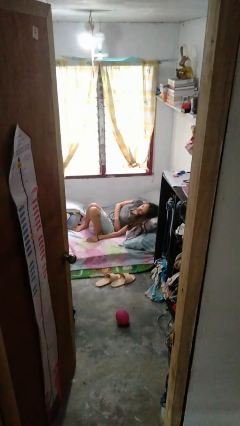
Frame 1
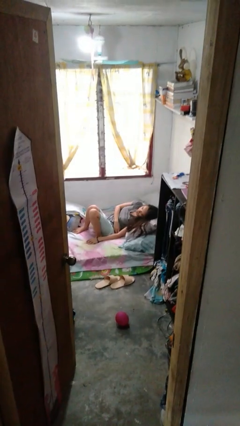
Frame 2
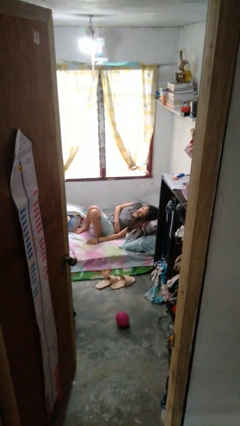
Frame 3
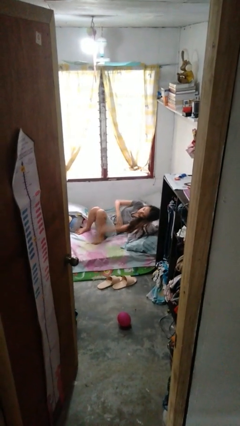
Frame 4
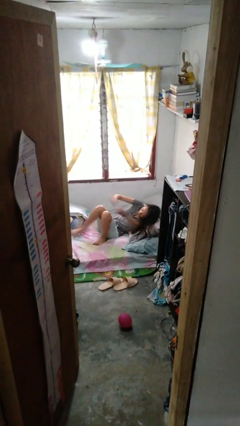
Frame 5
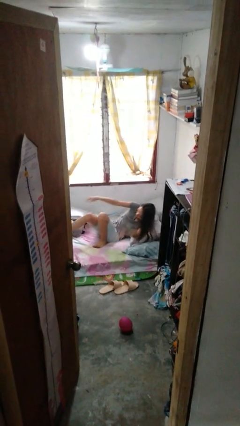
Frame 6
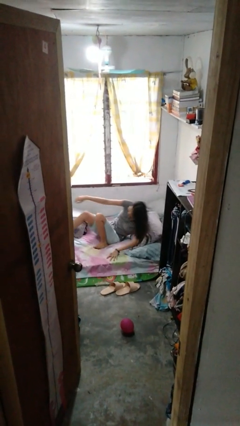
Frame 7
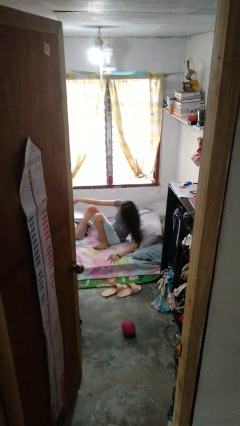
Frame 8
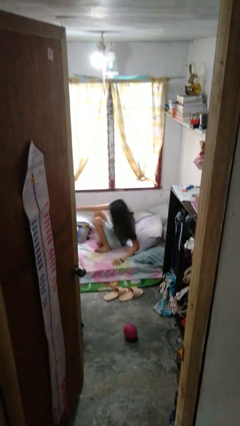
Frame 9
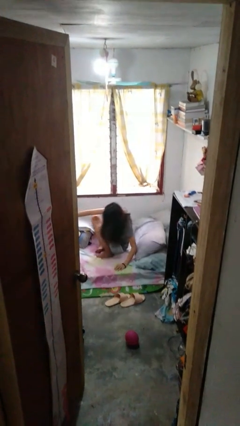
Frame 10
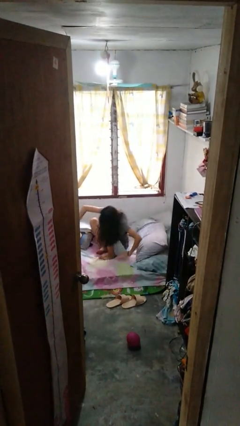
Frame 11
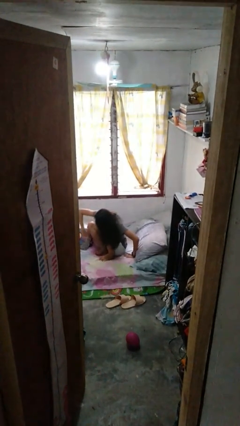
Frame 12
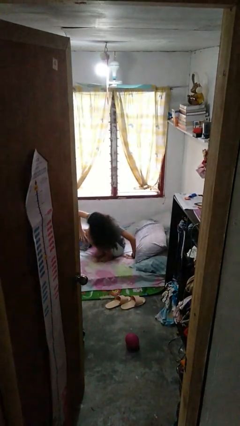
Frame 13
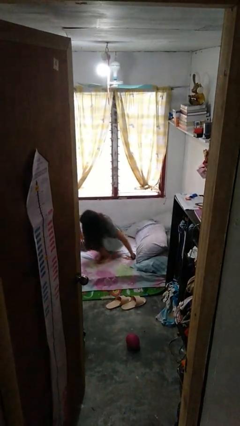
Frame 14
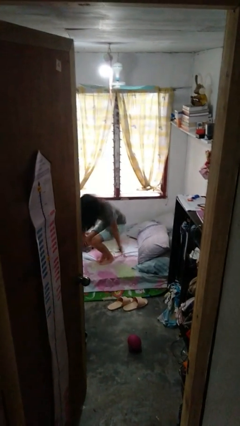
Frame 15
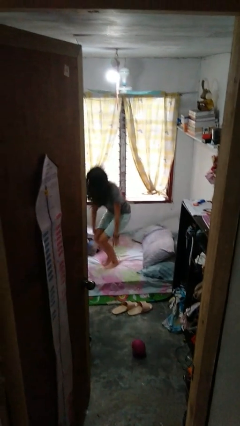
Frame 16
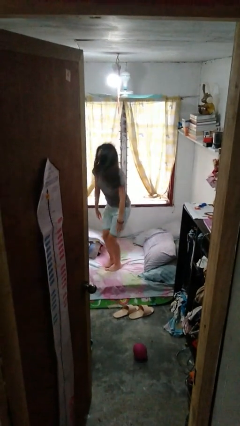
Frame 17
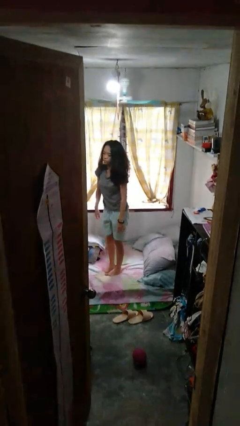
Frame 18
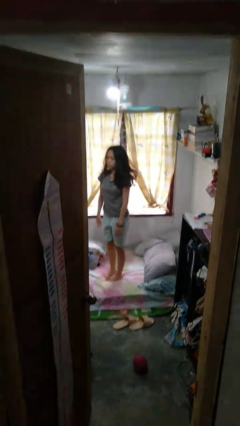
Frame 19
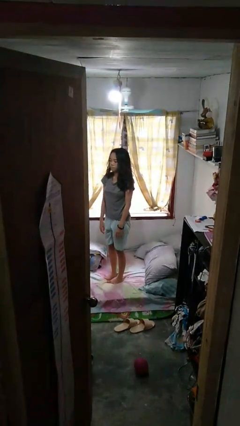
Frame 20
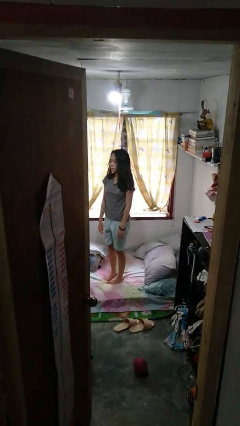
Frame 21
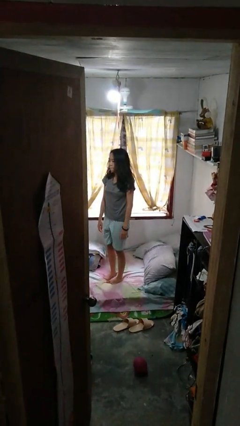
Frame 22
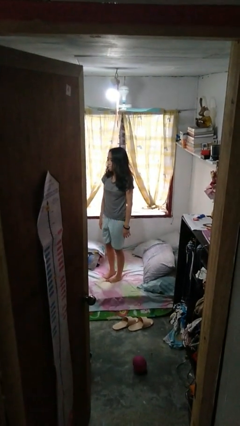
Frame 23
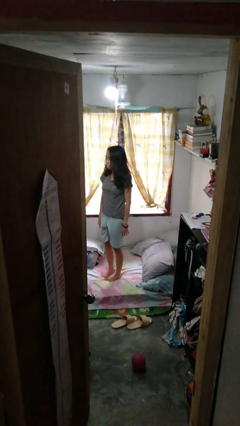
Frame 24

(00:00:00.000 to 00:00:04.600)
person stands up

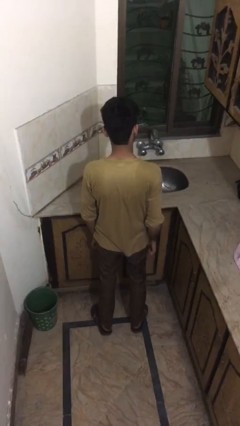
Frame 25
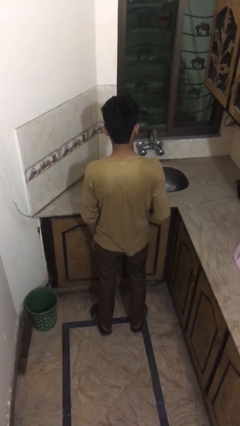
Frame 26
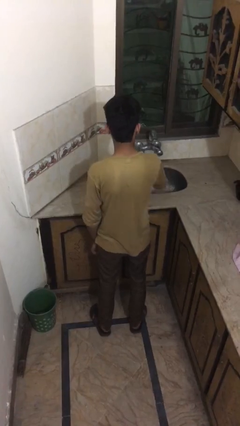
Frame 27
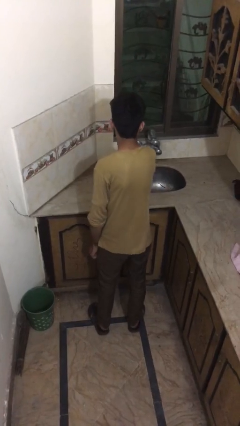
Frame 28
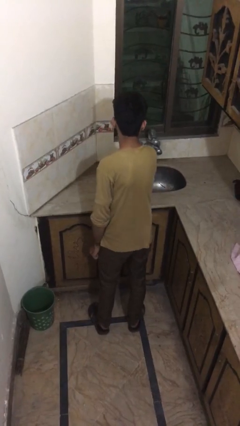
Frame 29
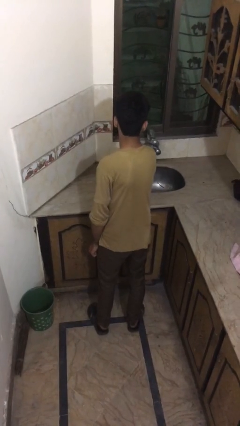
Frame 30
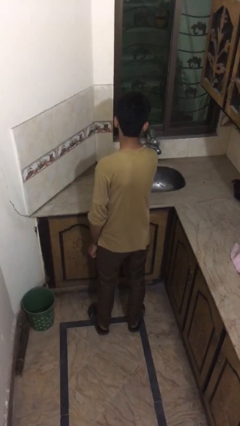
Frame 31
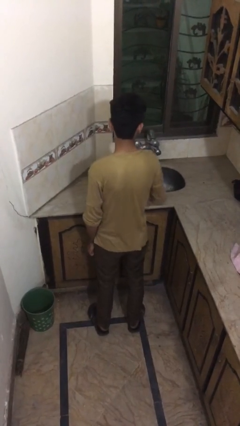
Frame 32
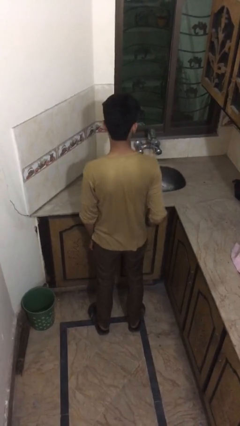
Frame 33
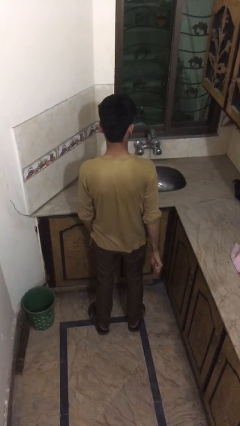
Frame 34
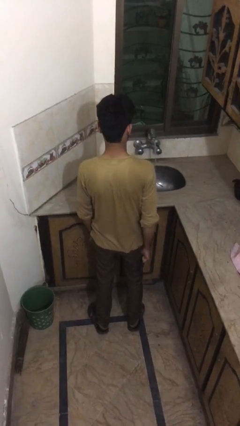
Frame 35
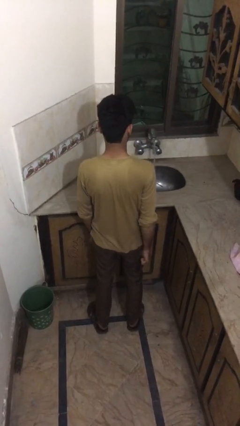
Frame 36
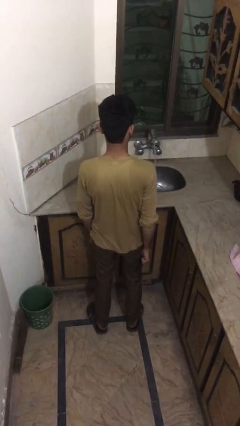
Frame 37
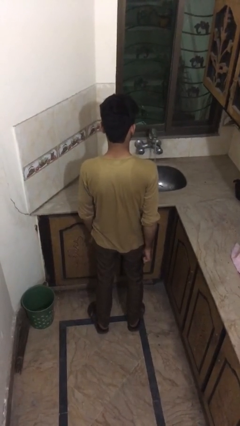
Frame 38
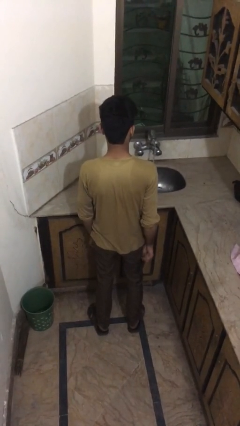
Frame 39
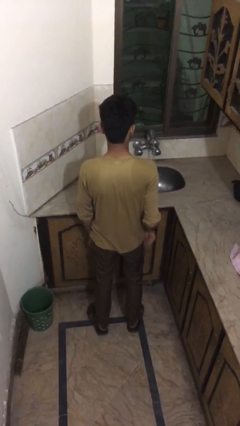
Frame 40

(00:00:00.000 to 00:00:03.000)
person turns on faucet

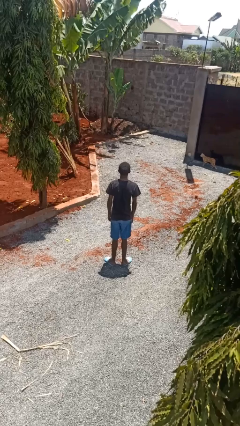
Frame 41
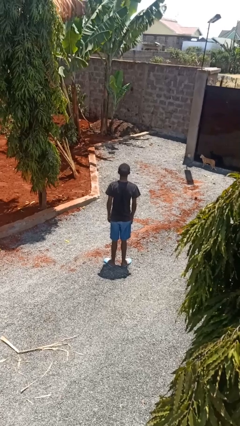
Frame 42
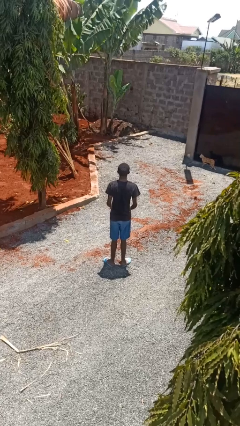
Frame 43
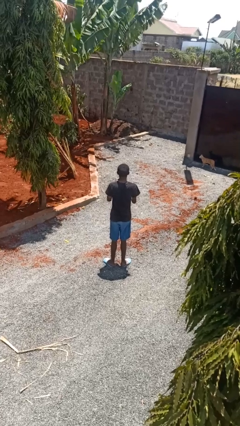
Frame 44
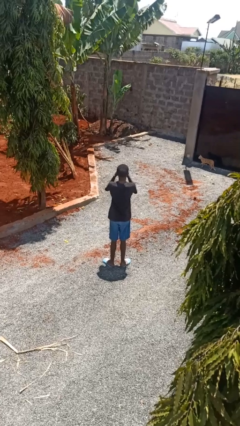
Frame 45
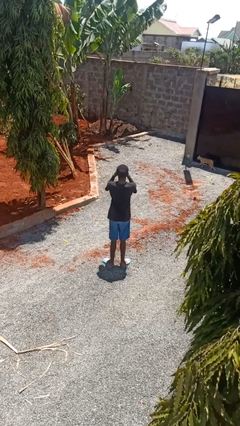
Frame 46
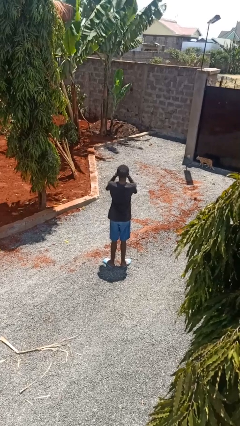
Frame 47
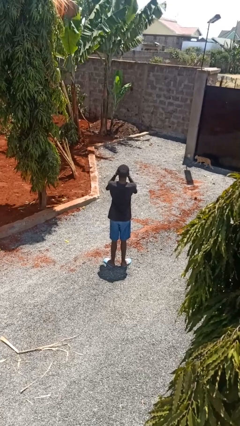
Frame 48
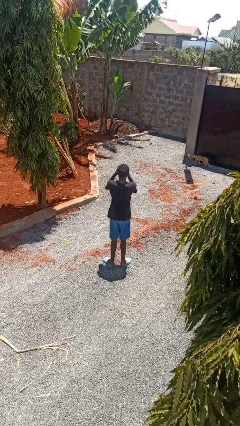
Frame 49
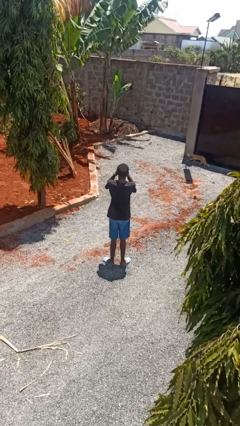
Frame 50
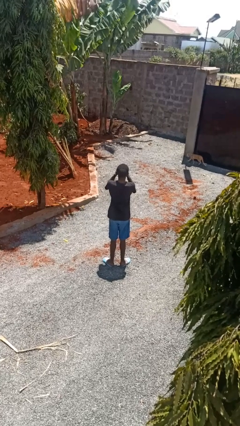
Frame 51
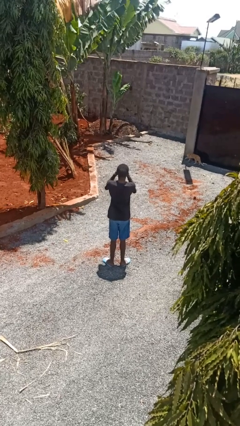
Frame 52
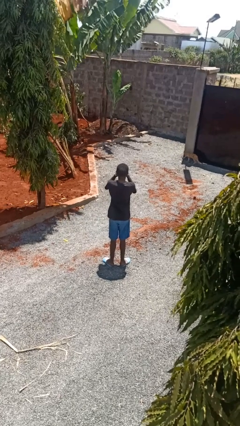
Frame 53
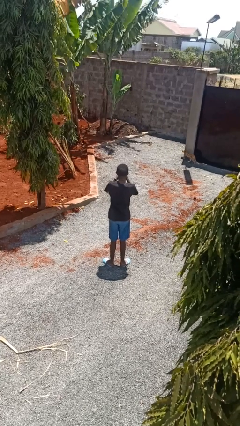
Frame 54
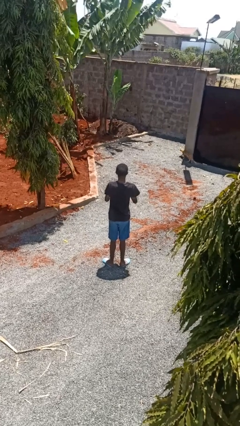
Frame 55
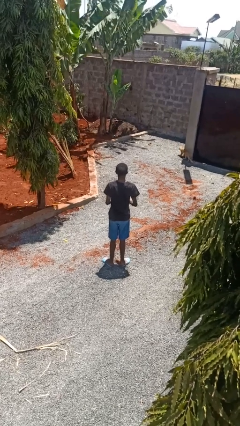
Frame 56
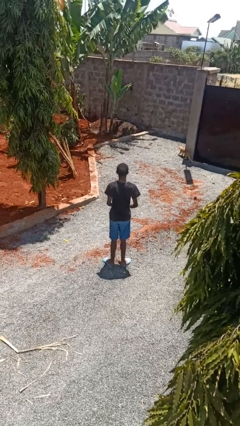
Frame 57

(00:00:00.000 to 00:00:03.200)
person rubs eyes

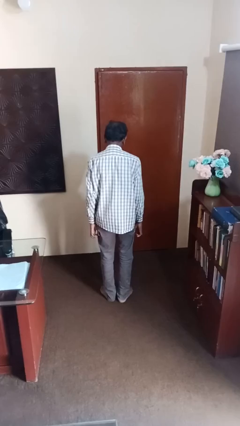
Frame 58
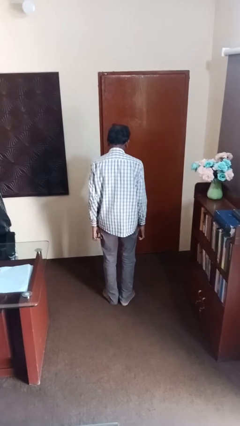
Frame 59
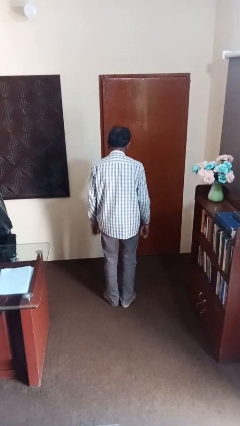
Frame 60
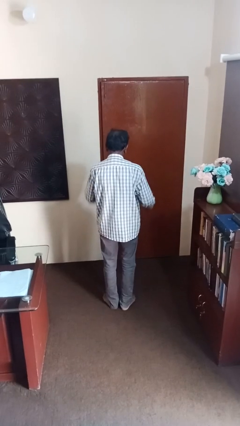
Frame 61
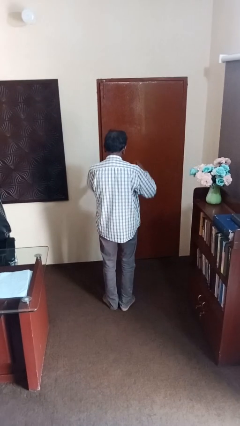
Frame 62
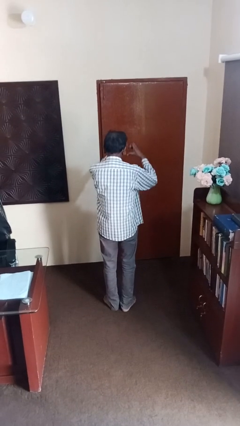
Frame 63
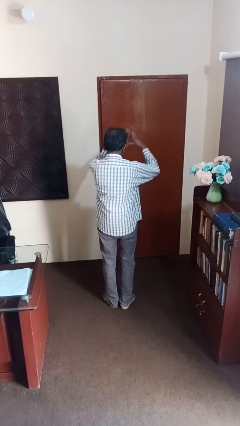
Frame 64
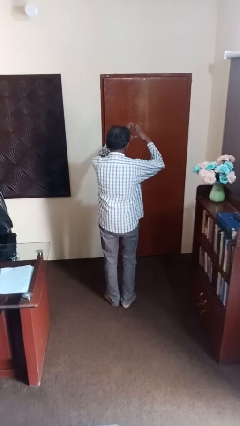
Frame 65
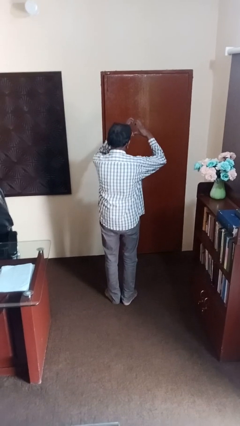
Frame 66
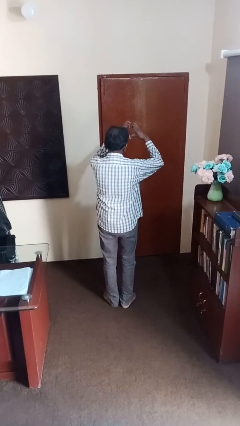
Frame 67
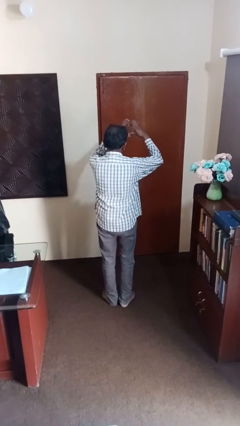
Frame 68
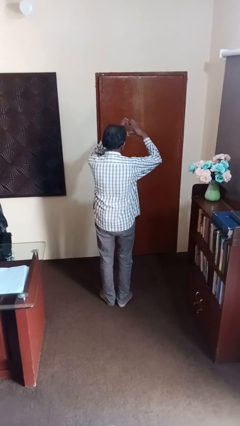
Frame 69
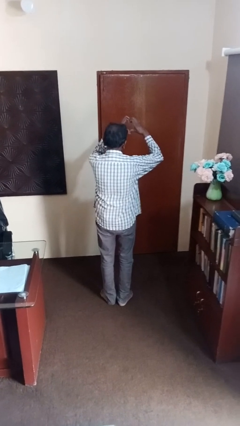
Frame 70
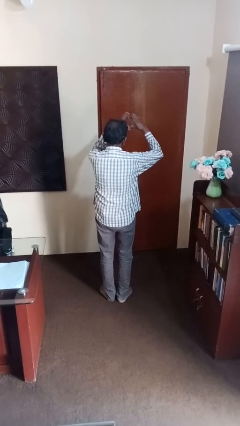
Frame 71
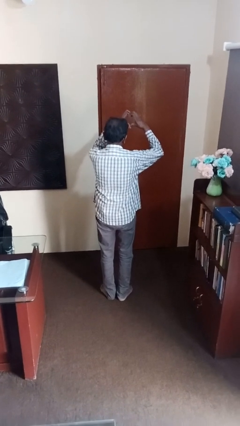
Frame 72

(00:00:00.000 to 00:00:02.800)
person gestures heart

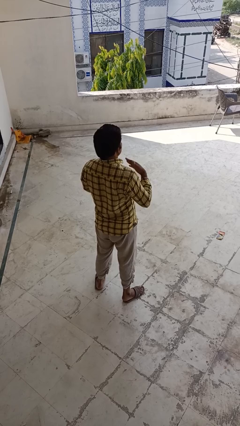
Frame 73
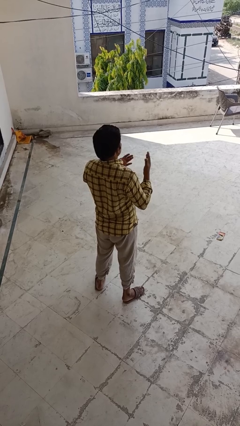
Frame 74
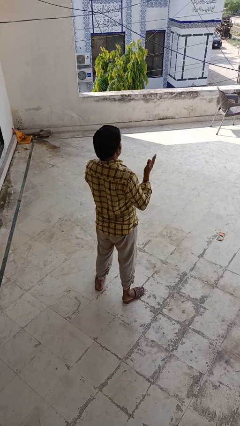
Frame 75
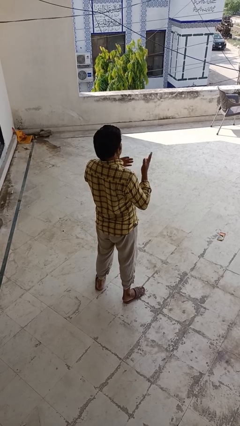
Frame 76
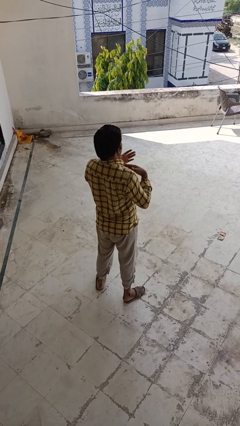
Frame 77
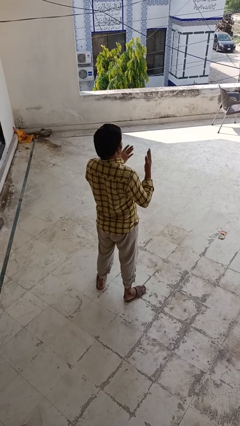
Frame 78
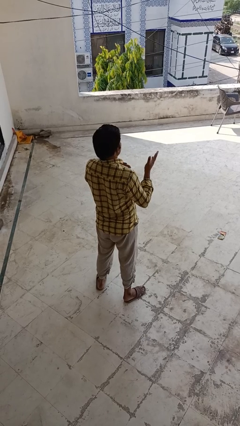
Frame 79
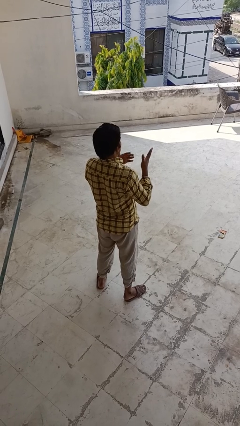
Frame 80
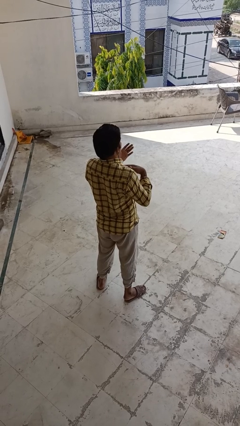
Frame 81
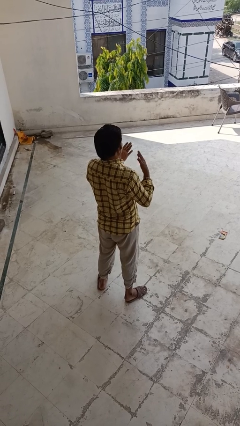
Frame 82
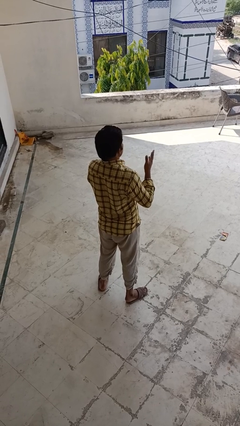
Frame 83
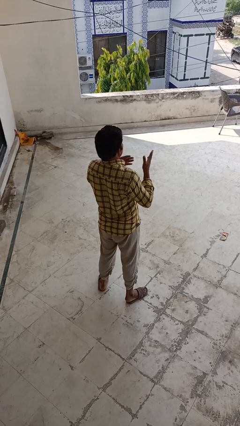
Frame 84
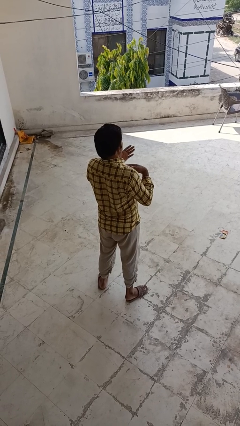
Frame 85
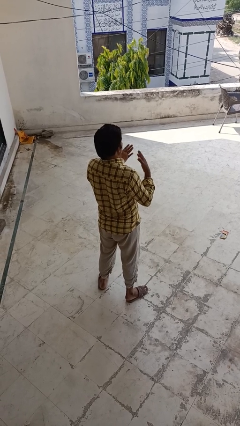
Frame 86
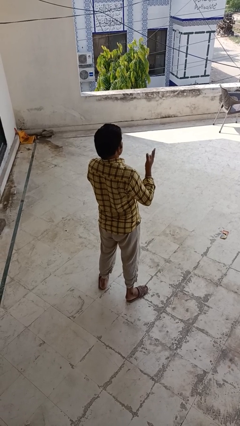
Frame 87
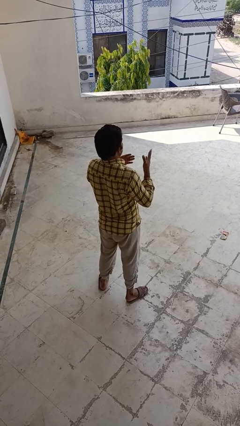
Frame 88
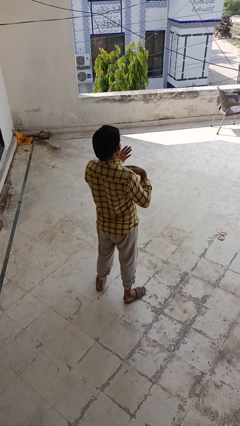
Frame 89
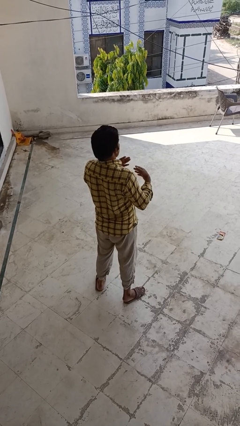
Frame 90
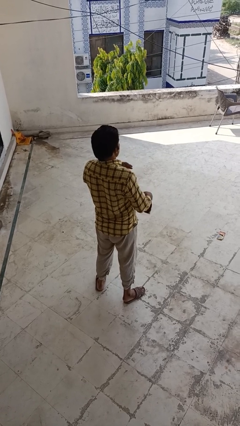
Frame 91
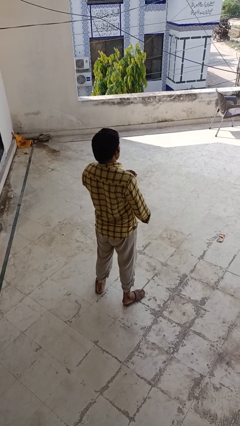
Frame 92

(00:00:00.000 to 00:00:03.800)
person drums on chest

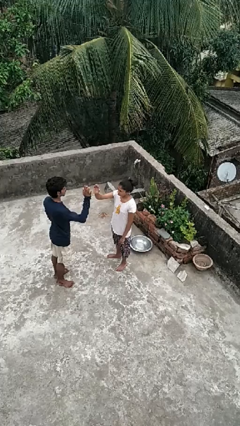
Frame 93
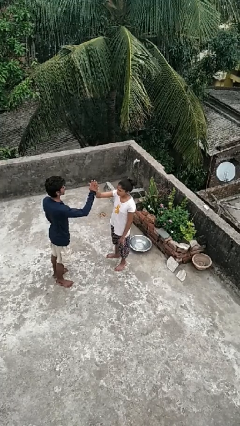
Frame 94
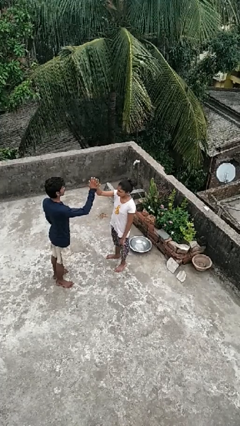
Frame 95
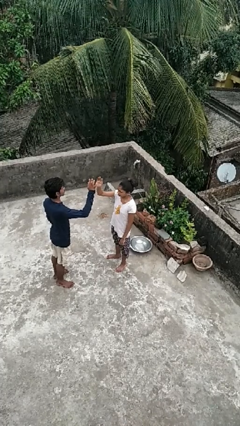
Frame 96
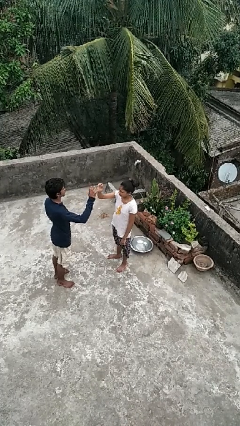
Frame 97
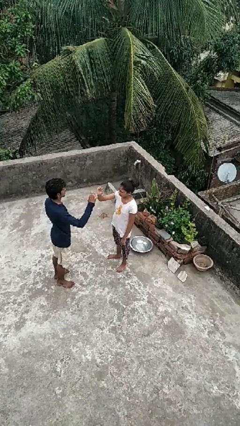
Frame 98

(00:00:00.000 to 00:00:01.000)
person highfives hand
